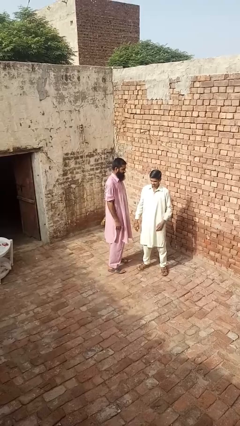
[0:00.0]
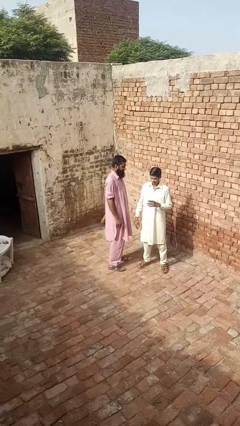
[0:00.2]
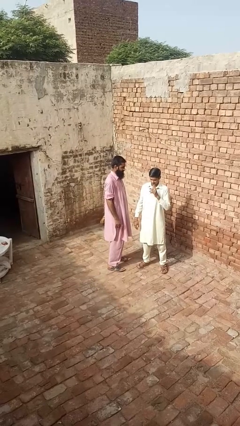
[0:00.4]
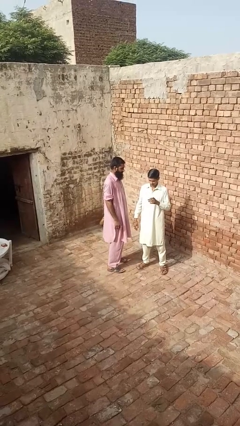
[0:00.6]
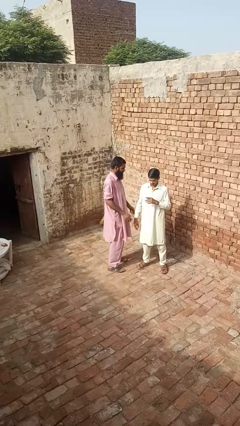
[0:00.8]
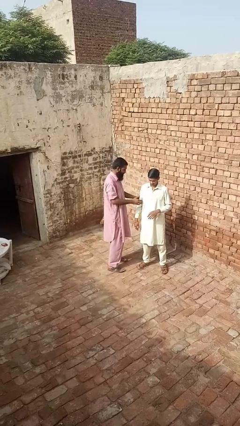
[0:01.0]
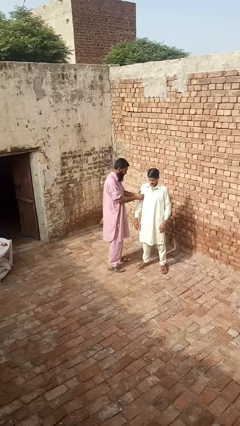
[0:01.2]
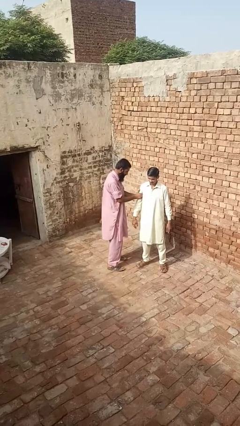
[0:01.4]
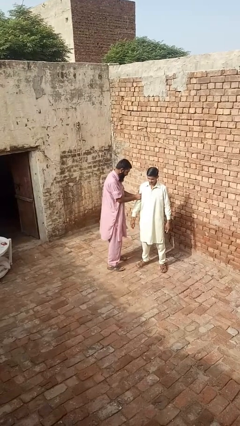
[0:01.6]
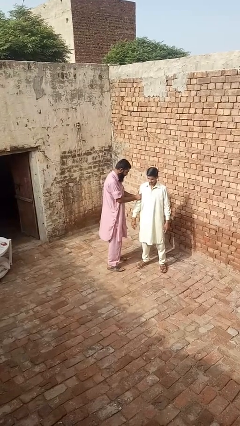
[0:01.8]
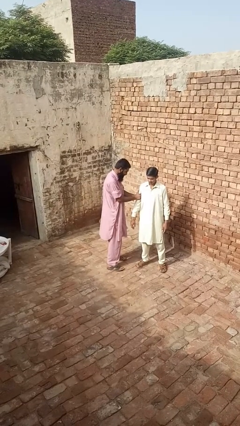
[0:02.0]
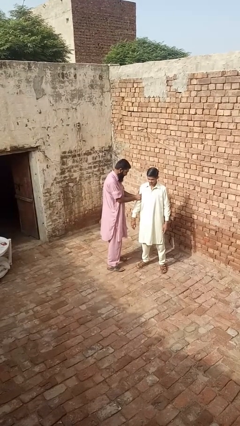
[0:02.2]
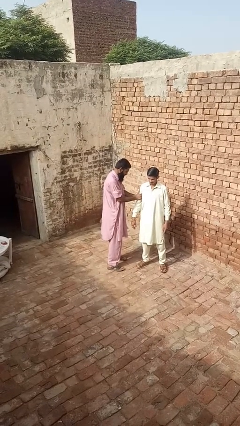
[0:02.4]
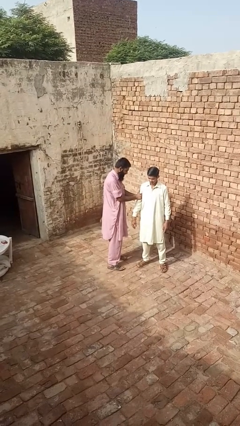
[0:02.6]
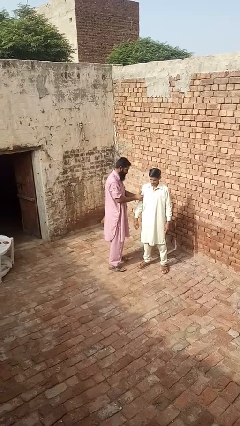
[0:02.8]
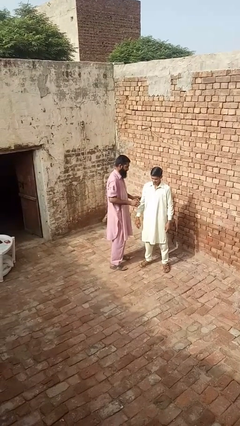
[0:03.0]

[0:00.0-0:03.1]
person grabs person by bicep

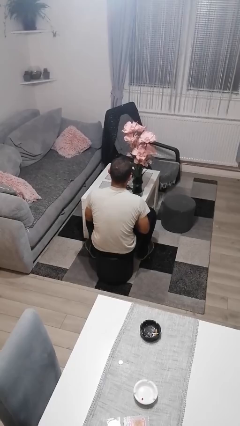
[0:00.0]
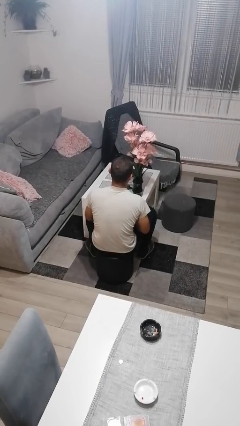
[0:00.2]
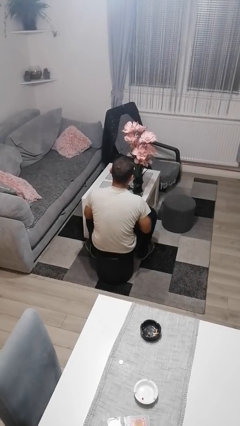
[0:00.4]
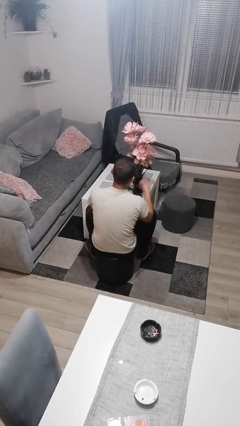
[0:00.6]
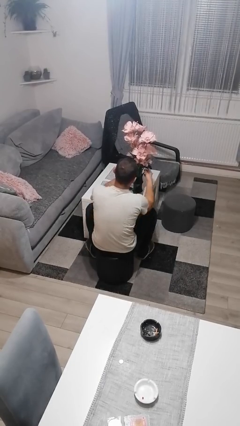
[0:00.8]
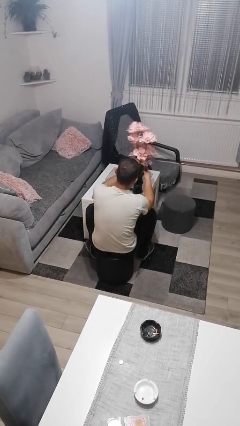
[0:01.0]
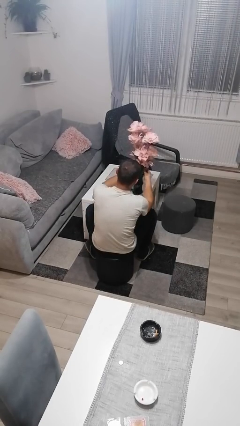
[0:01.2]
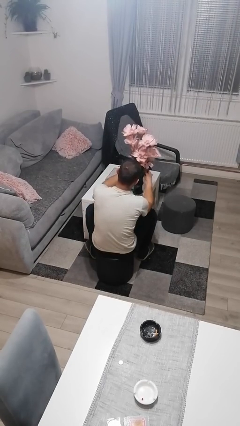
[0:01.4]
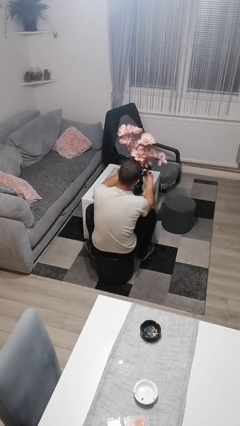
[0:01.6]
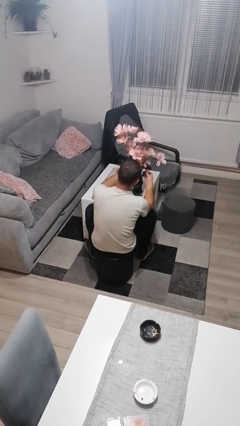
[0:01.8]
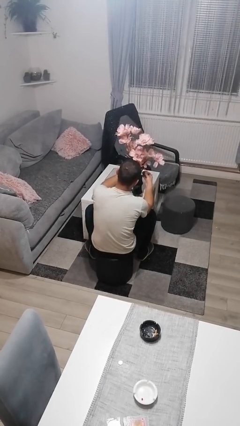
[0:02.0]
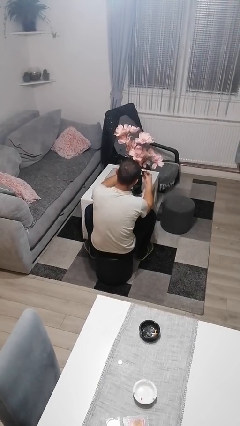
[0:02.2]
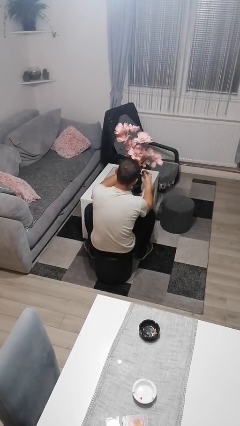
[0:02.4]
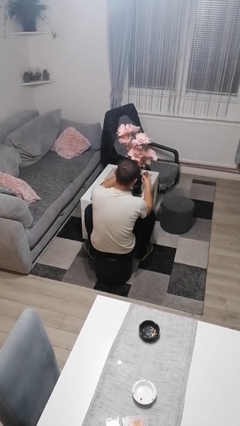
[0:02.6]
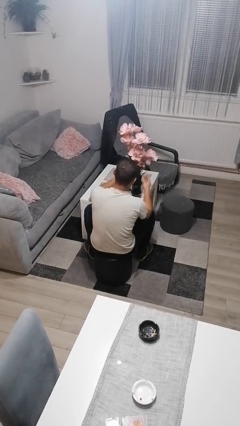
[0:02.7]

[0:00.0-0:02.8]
person arranges flowers in vase

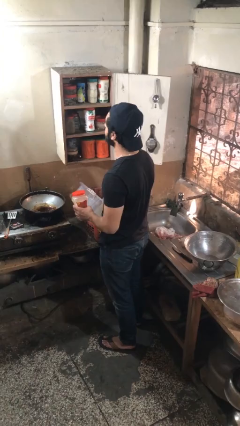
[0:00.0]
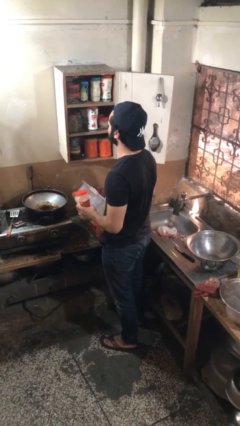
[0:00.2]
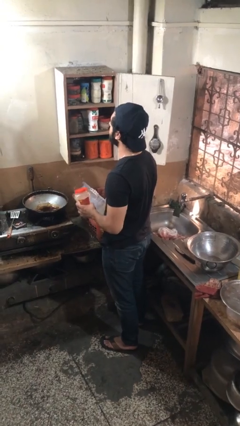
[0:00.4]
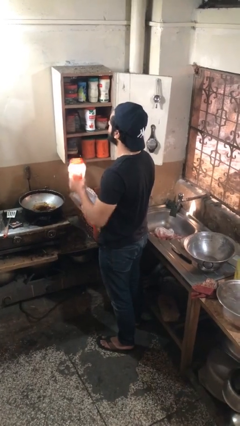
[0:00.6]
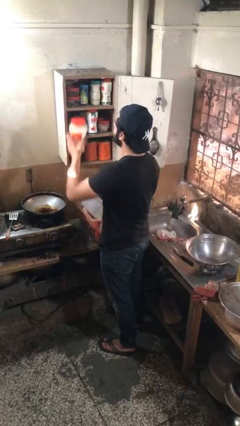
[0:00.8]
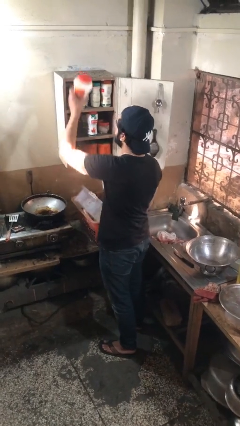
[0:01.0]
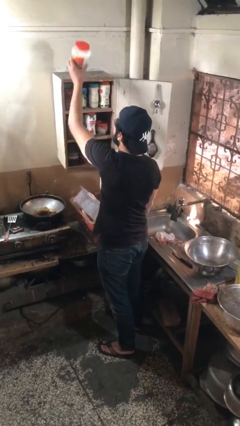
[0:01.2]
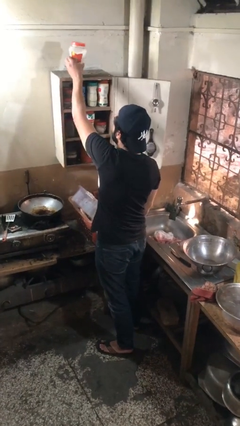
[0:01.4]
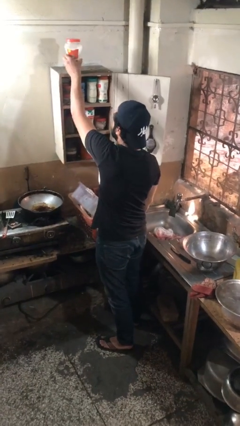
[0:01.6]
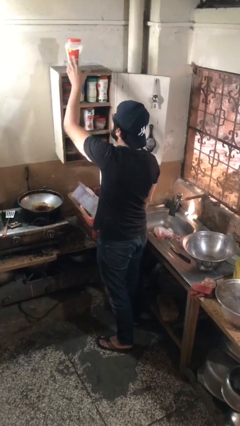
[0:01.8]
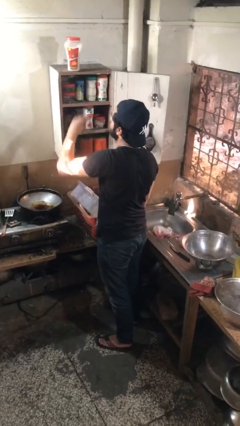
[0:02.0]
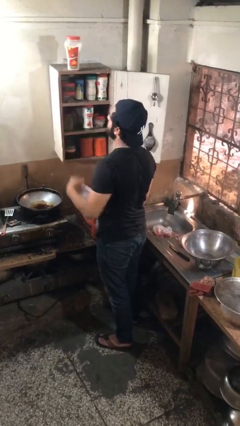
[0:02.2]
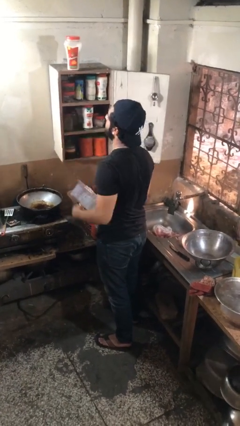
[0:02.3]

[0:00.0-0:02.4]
person puts object in cabinet

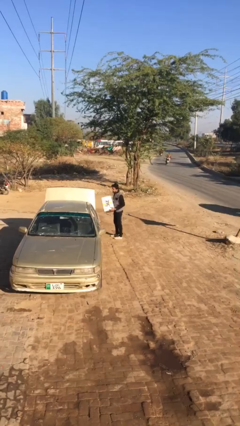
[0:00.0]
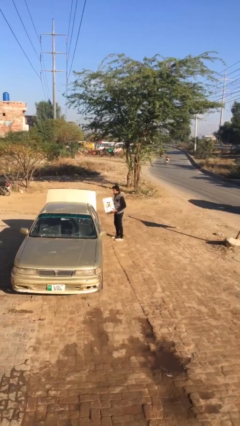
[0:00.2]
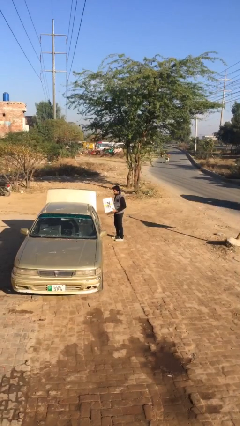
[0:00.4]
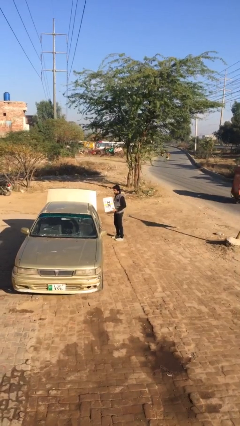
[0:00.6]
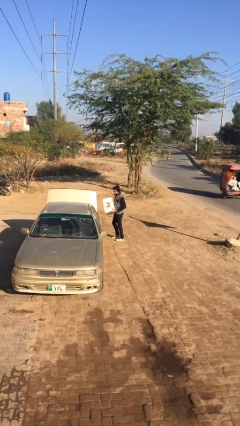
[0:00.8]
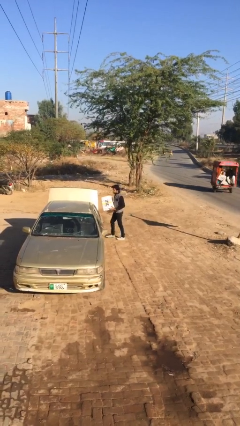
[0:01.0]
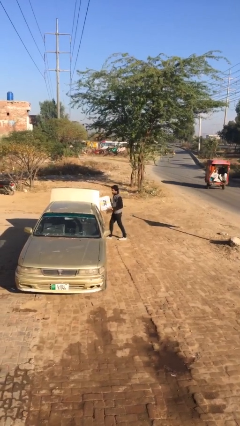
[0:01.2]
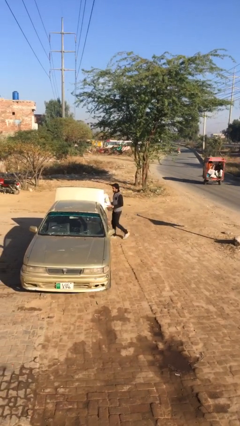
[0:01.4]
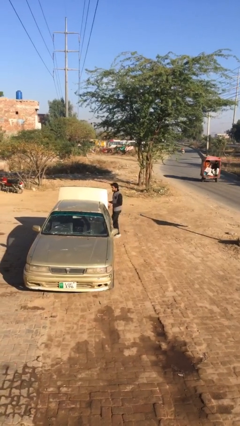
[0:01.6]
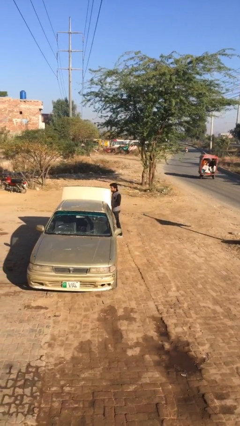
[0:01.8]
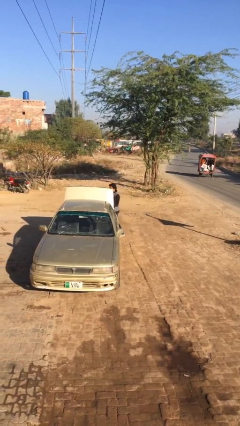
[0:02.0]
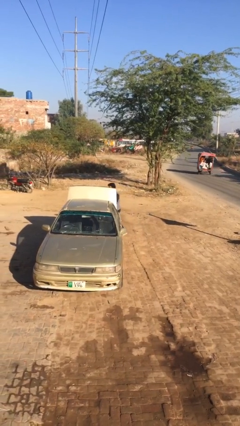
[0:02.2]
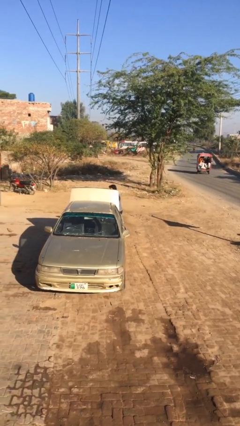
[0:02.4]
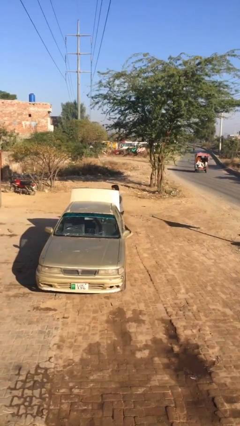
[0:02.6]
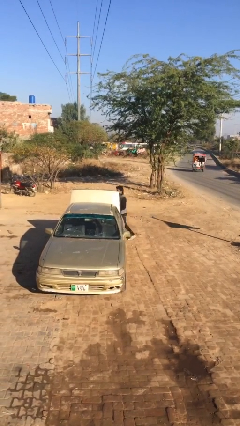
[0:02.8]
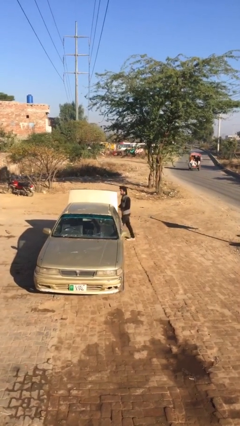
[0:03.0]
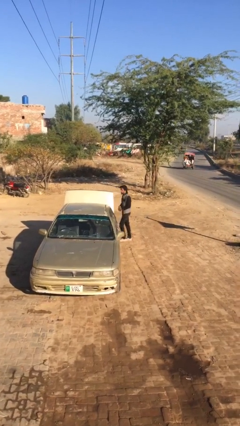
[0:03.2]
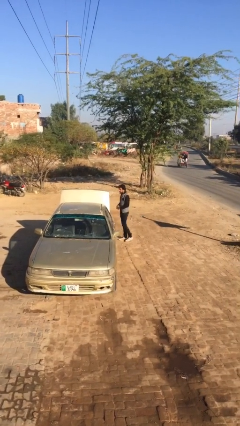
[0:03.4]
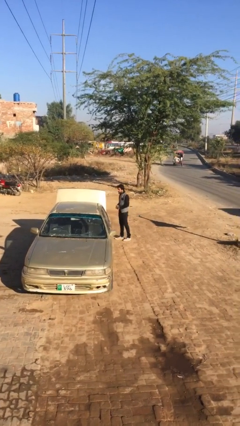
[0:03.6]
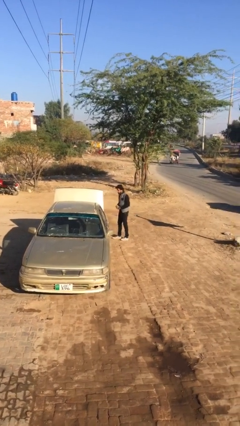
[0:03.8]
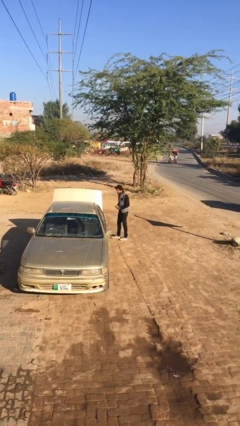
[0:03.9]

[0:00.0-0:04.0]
person loads car

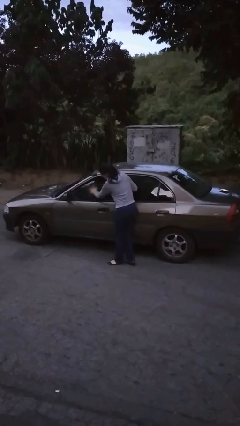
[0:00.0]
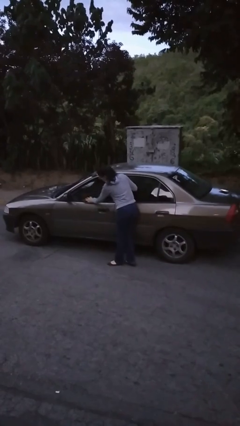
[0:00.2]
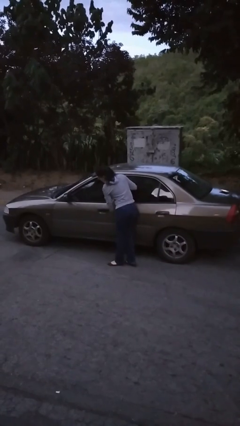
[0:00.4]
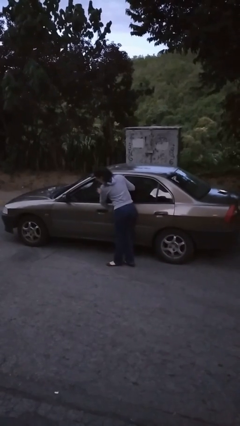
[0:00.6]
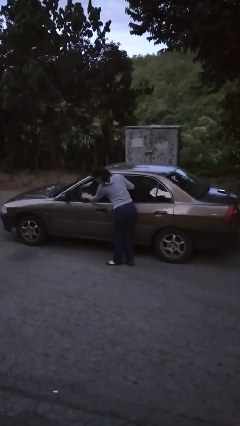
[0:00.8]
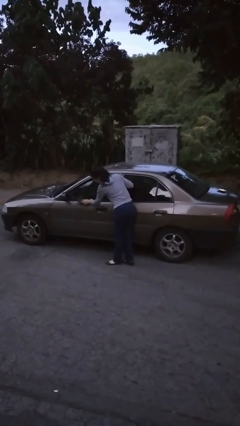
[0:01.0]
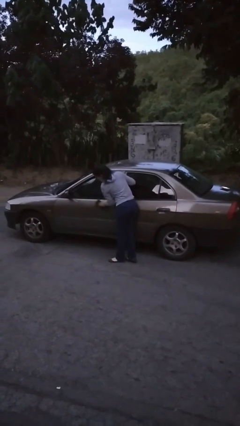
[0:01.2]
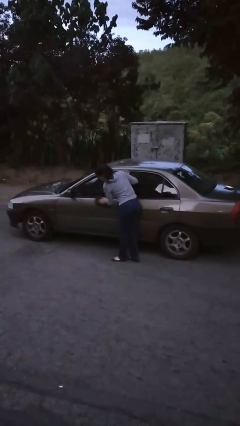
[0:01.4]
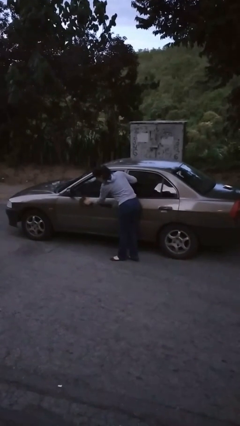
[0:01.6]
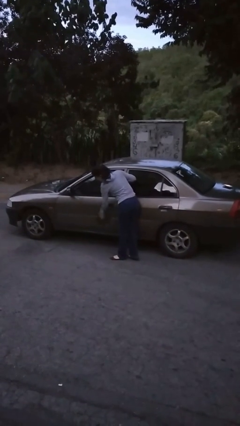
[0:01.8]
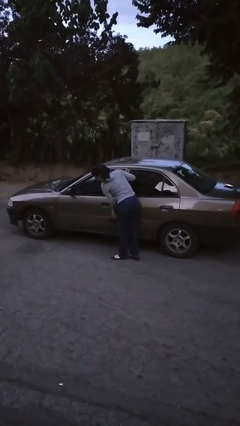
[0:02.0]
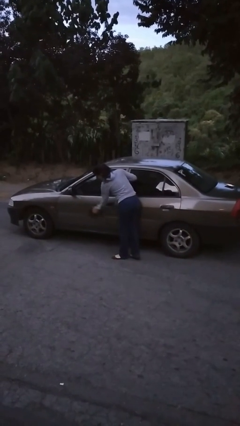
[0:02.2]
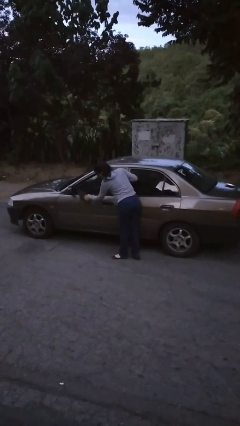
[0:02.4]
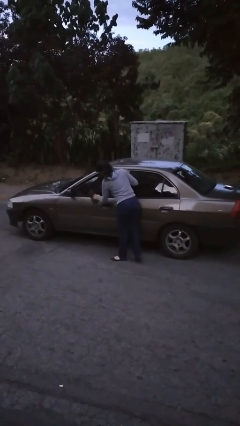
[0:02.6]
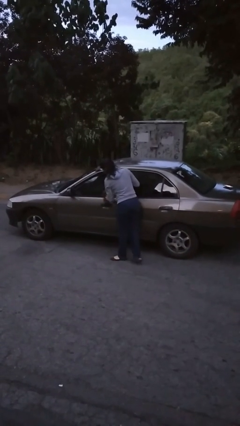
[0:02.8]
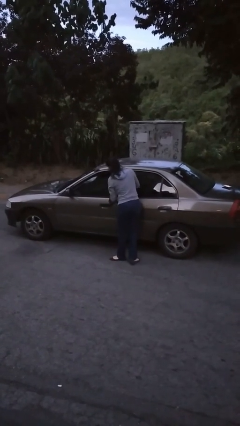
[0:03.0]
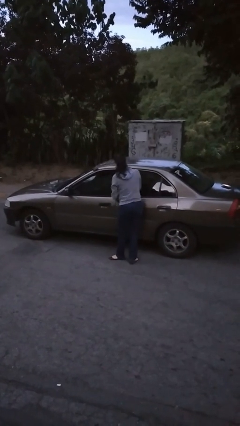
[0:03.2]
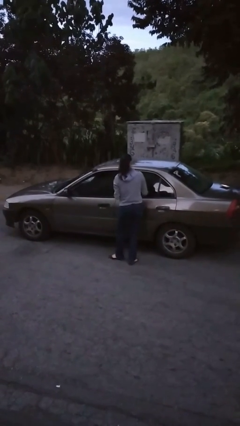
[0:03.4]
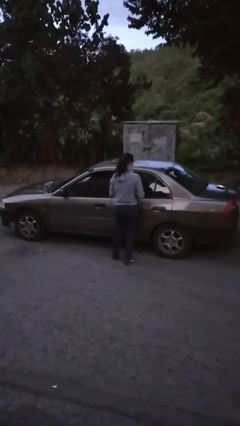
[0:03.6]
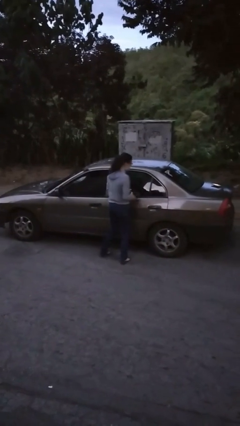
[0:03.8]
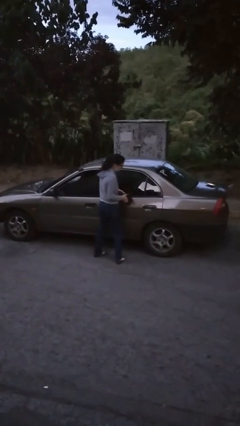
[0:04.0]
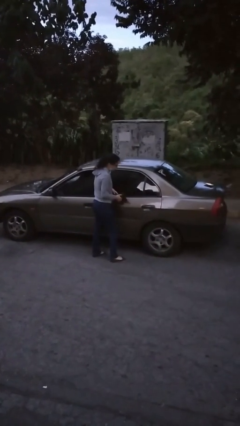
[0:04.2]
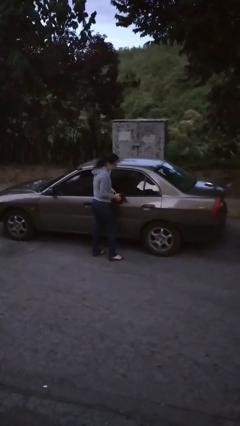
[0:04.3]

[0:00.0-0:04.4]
person polishes car with rag

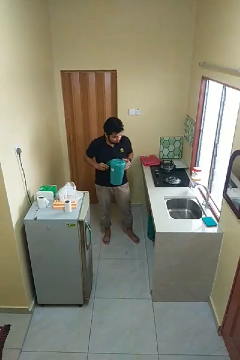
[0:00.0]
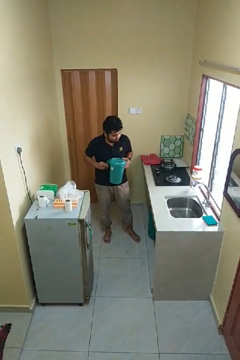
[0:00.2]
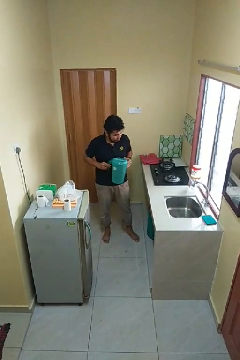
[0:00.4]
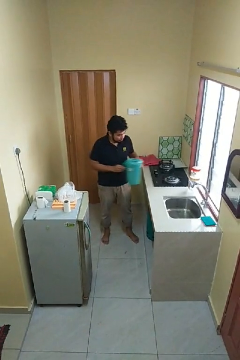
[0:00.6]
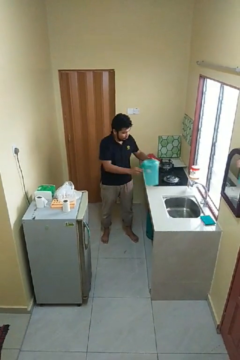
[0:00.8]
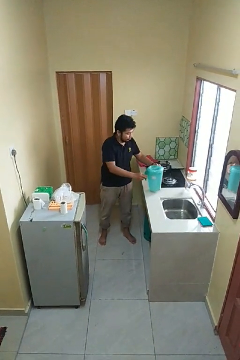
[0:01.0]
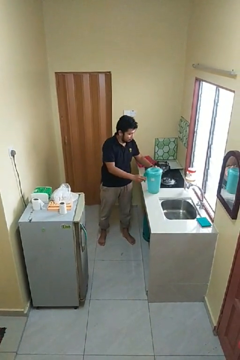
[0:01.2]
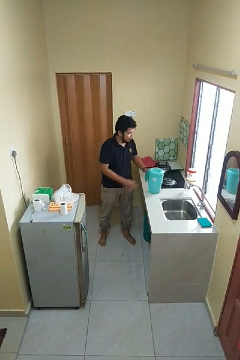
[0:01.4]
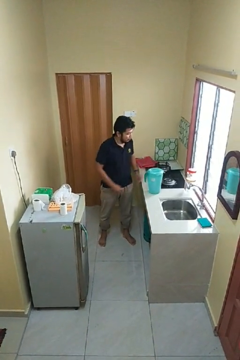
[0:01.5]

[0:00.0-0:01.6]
person puts down object on countertop
